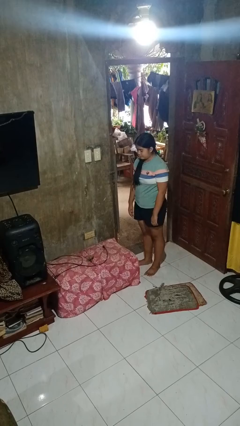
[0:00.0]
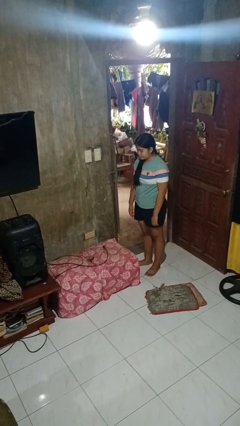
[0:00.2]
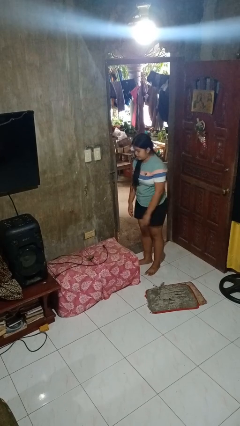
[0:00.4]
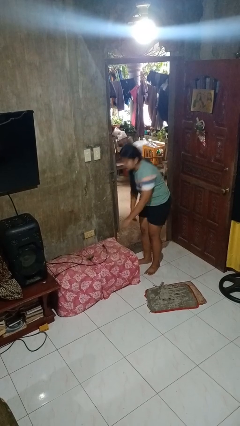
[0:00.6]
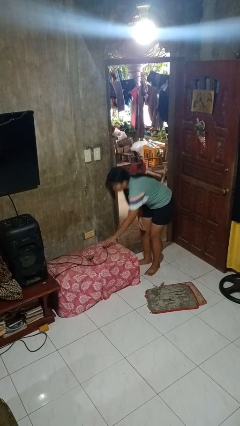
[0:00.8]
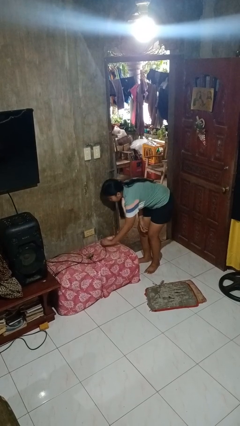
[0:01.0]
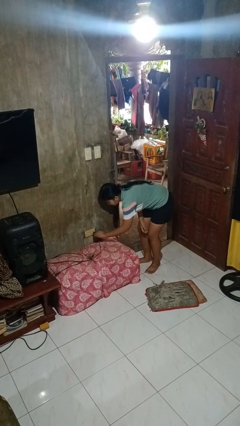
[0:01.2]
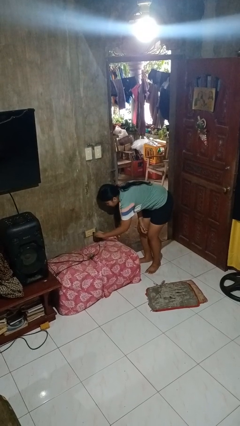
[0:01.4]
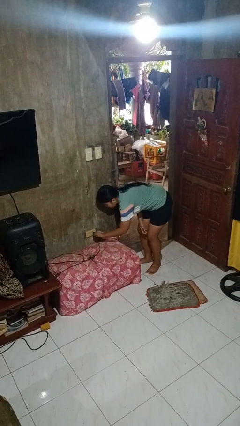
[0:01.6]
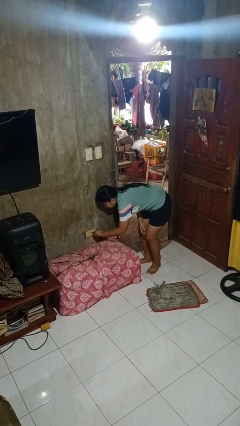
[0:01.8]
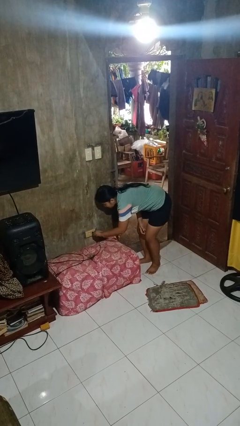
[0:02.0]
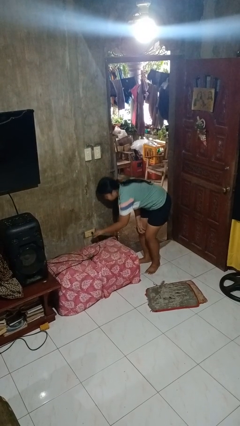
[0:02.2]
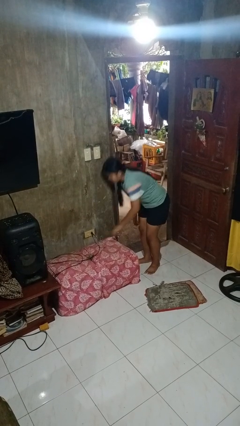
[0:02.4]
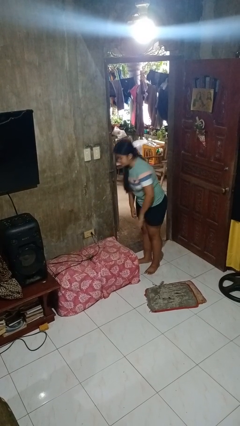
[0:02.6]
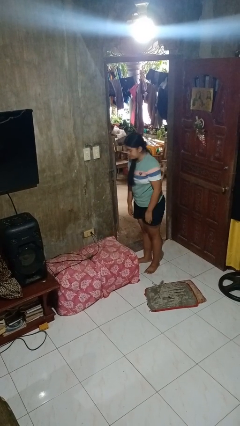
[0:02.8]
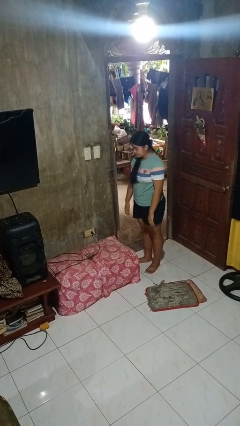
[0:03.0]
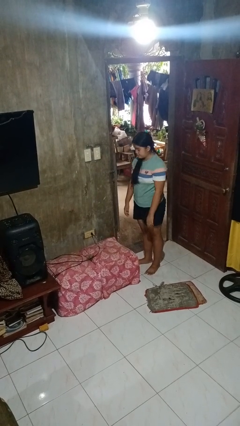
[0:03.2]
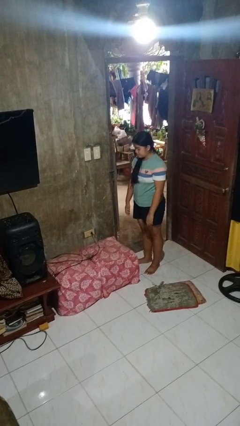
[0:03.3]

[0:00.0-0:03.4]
person plugs into electrical socket

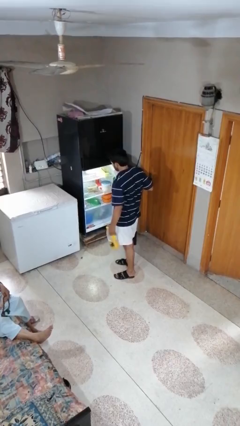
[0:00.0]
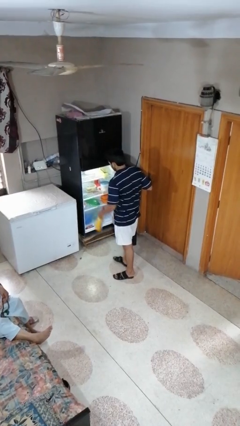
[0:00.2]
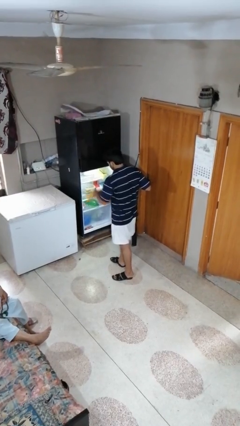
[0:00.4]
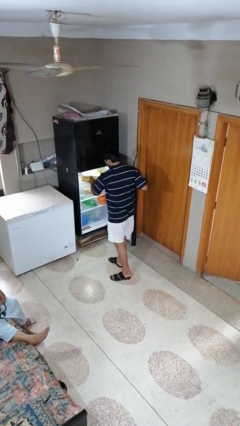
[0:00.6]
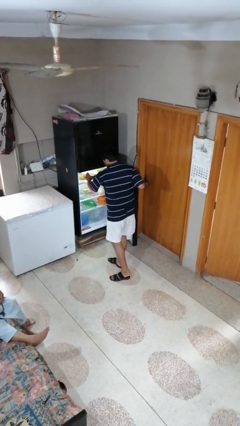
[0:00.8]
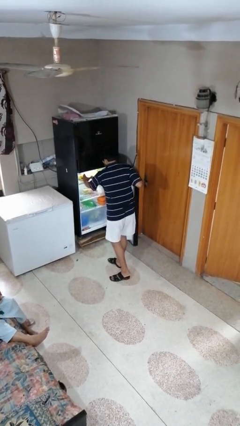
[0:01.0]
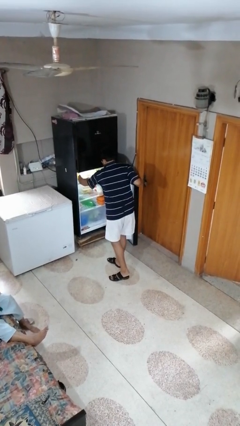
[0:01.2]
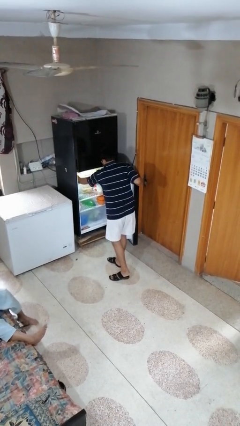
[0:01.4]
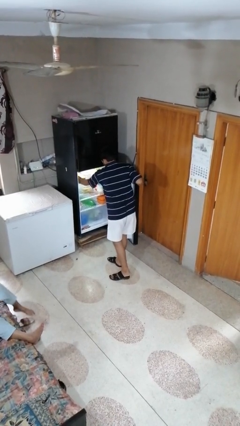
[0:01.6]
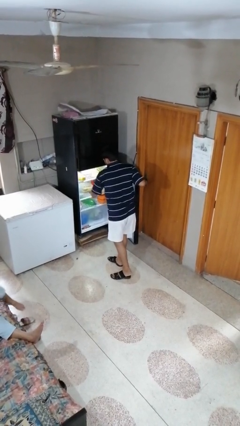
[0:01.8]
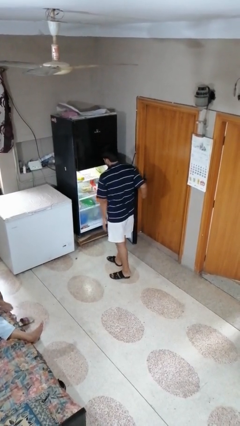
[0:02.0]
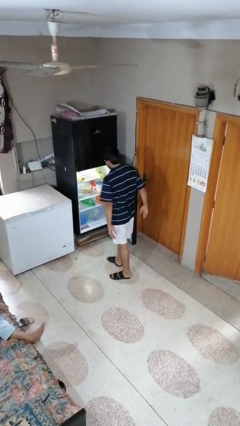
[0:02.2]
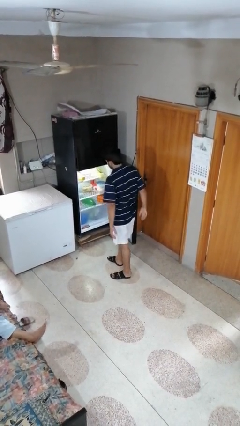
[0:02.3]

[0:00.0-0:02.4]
person puts object into refrigerator

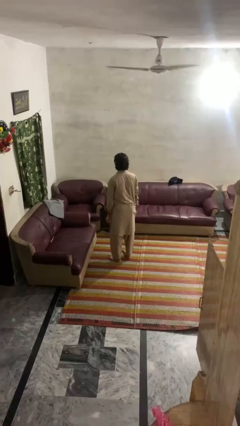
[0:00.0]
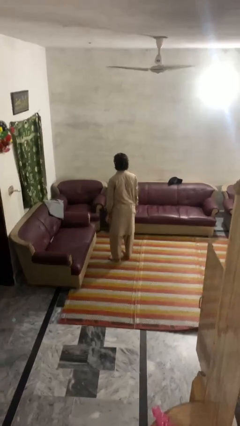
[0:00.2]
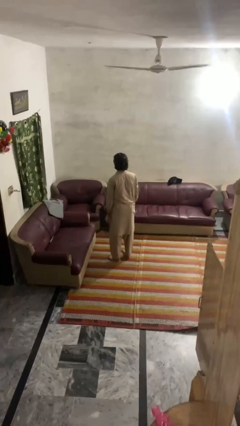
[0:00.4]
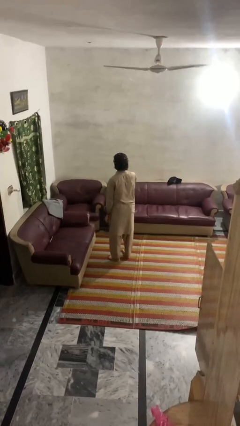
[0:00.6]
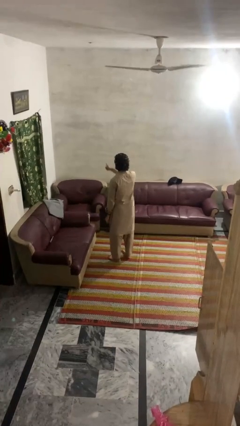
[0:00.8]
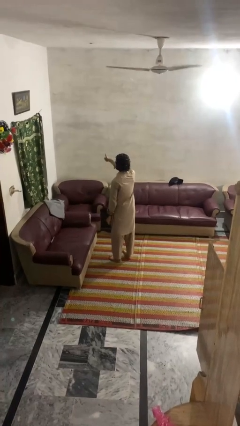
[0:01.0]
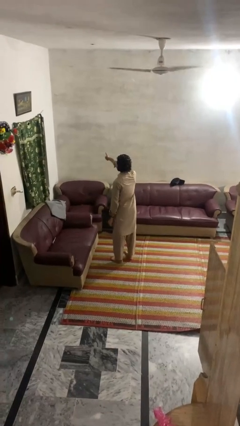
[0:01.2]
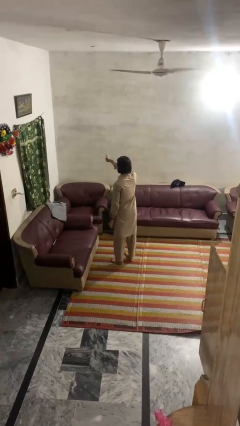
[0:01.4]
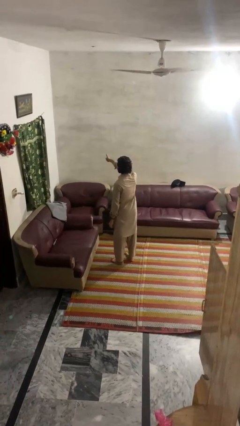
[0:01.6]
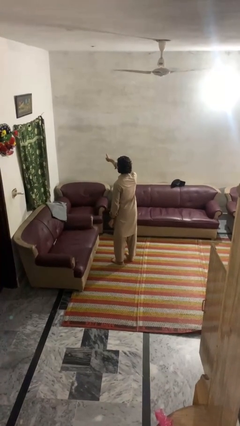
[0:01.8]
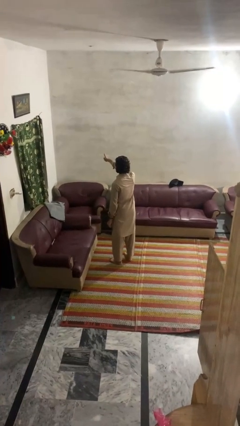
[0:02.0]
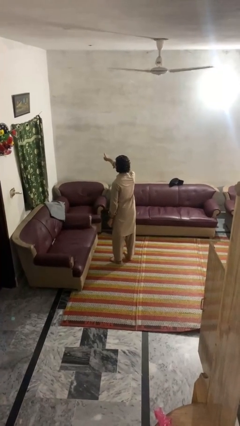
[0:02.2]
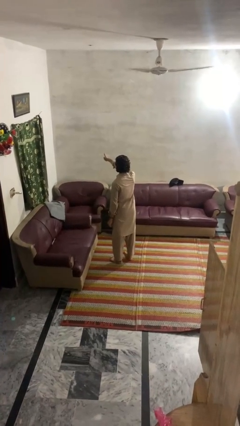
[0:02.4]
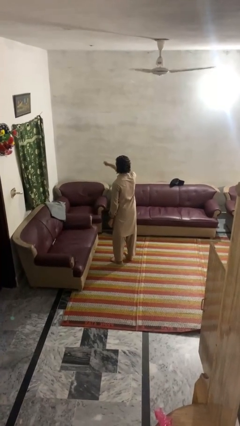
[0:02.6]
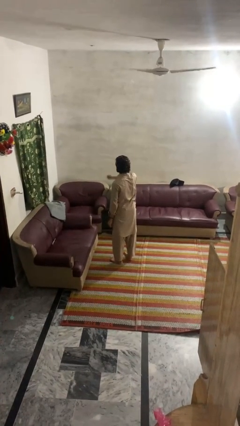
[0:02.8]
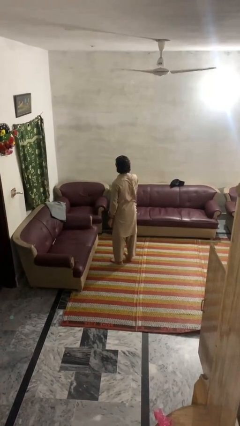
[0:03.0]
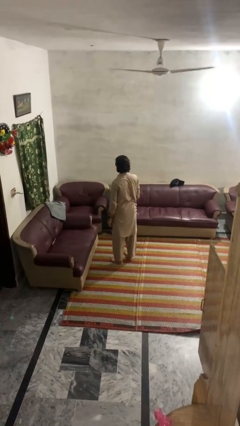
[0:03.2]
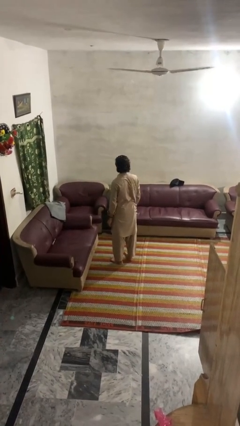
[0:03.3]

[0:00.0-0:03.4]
person gestures thumbs up

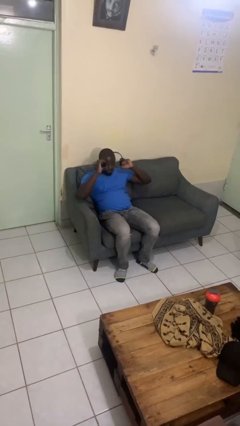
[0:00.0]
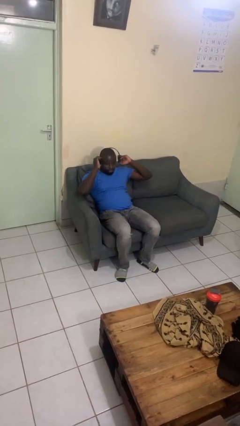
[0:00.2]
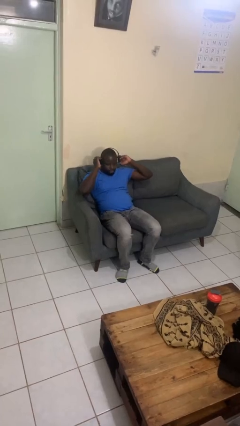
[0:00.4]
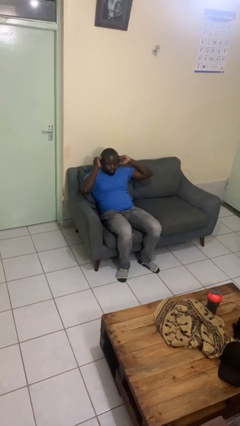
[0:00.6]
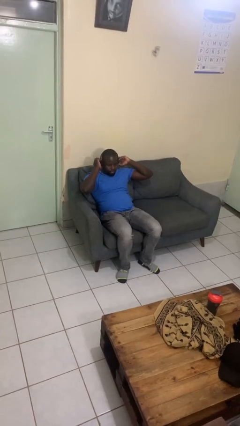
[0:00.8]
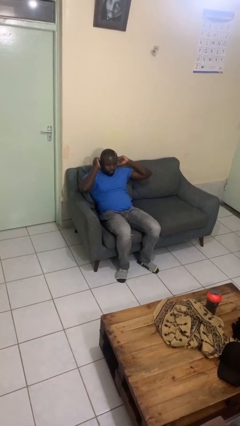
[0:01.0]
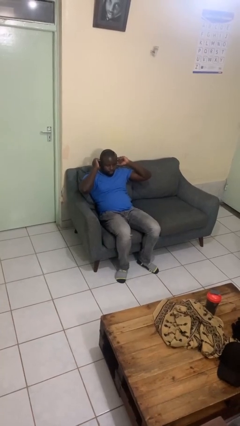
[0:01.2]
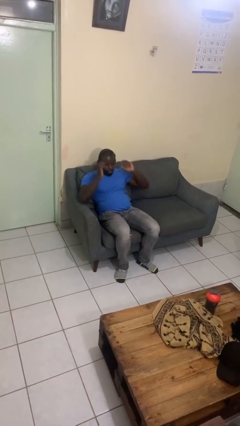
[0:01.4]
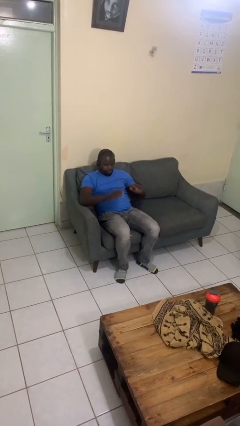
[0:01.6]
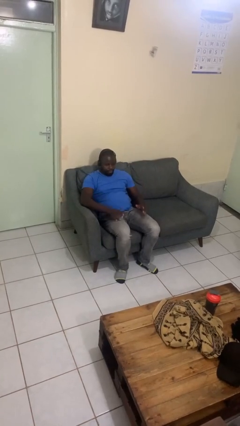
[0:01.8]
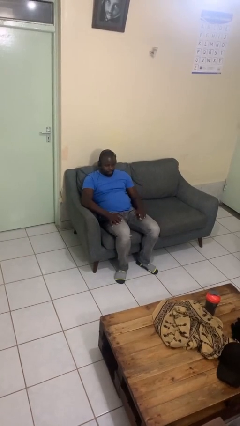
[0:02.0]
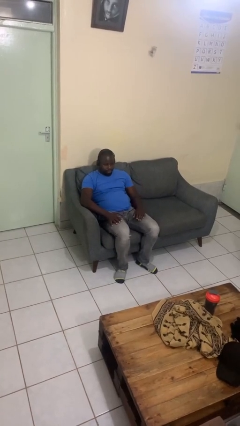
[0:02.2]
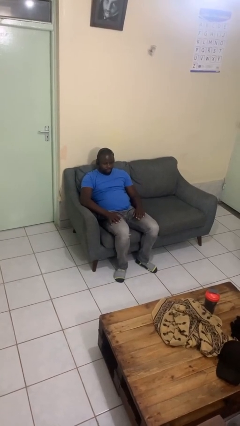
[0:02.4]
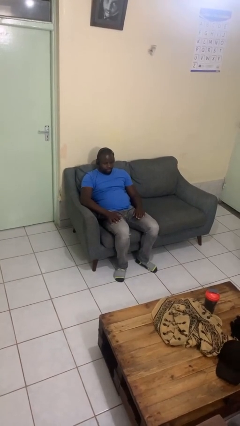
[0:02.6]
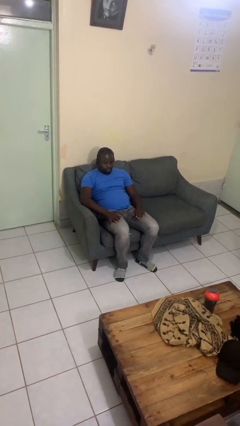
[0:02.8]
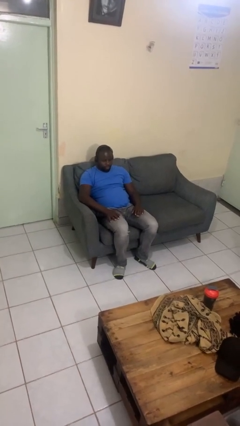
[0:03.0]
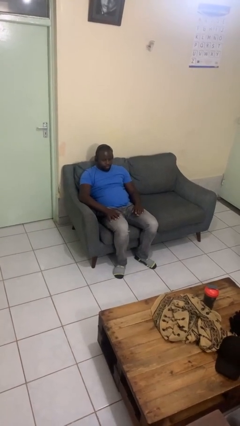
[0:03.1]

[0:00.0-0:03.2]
person puts on headphones

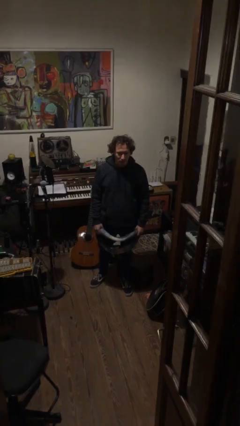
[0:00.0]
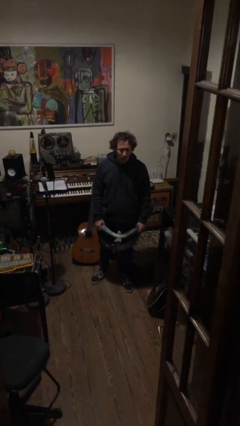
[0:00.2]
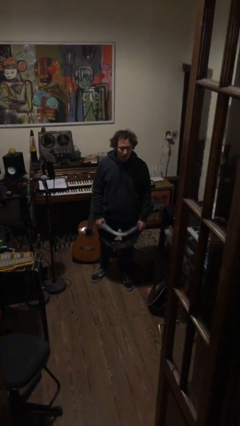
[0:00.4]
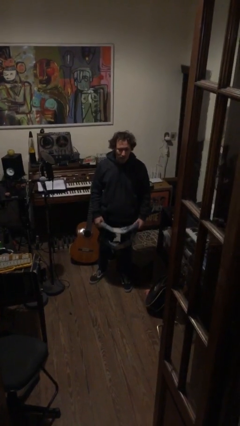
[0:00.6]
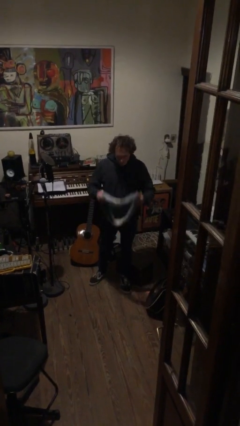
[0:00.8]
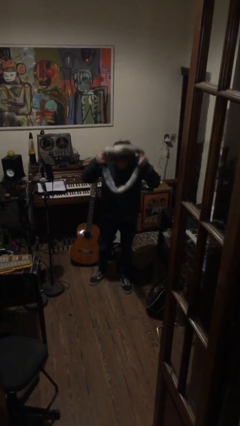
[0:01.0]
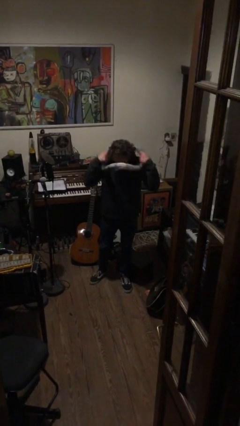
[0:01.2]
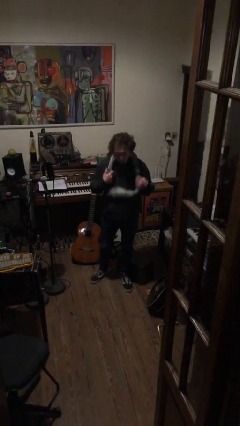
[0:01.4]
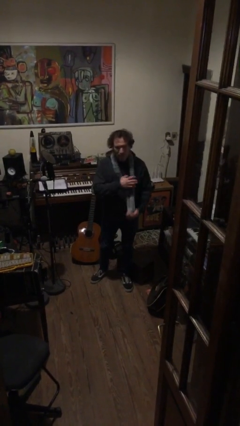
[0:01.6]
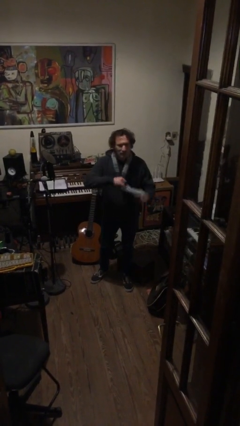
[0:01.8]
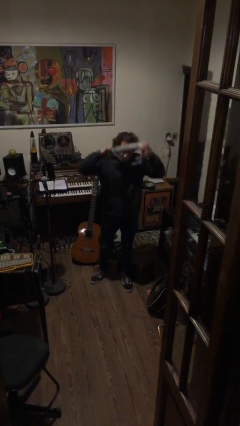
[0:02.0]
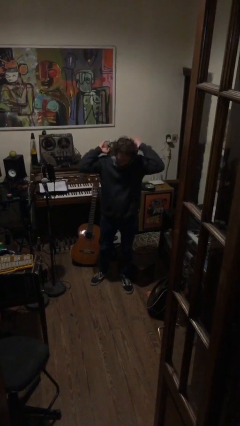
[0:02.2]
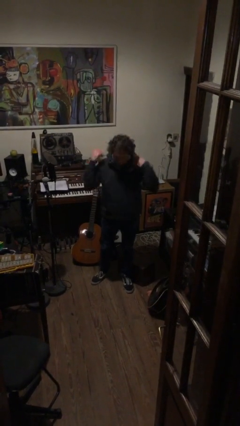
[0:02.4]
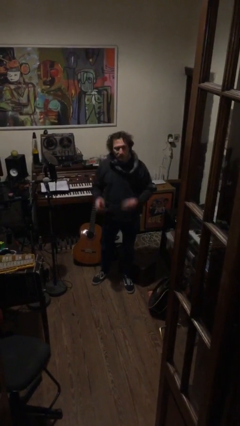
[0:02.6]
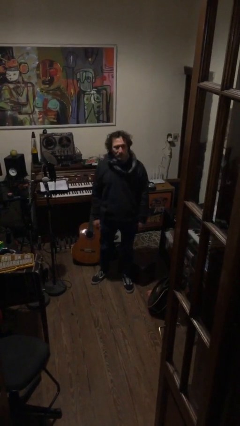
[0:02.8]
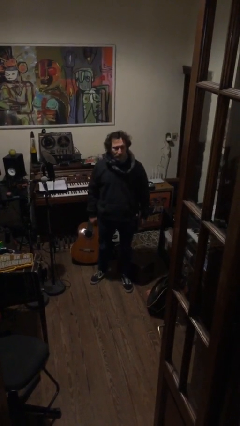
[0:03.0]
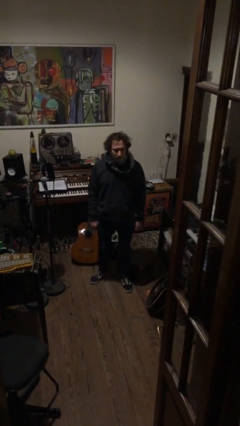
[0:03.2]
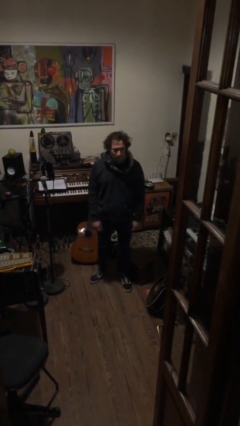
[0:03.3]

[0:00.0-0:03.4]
person puts on scarf

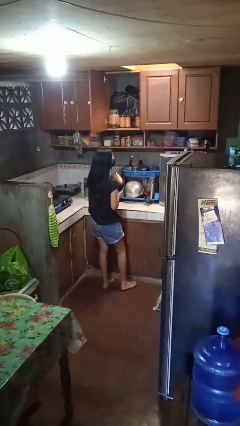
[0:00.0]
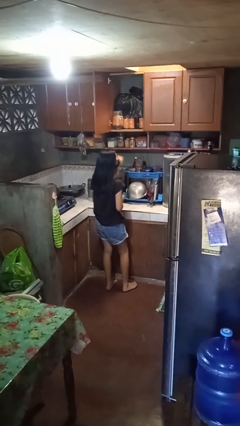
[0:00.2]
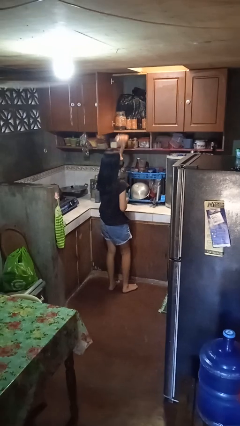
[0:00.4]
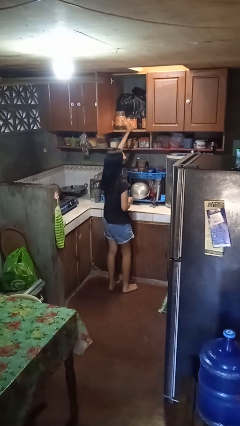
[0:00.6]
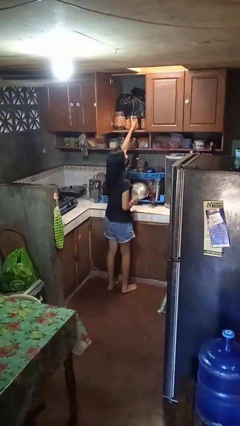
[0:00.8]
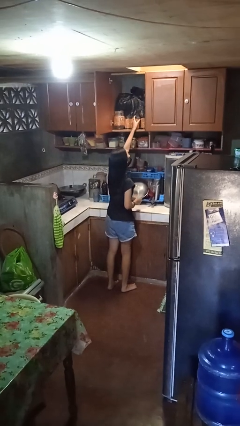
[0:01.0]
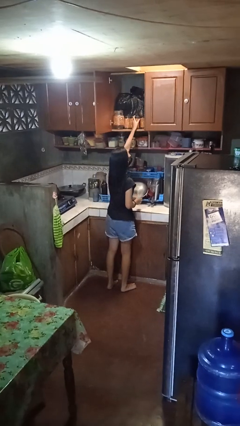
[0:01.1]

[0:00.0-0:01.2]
person puts down object into cabinet

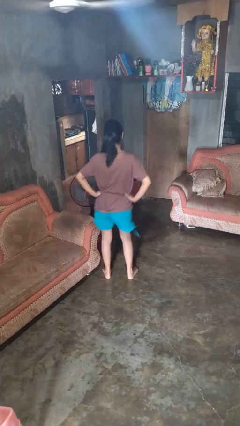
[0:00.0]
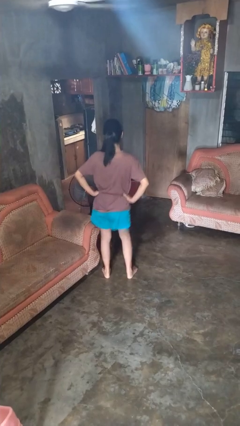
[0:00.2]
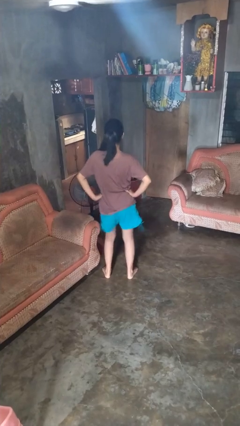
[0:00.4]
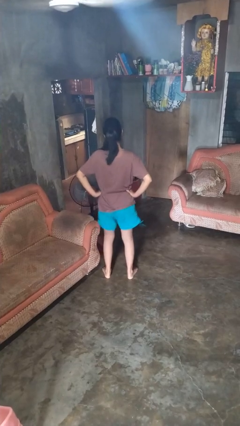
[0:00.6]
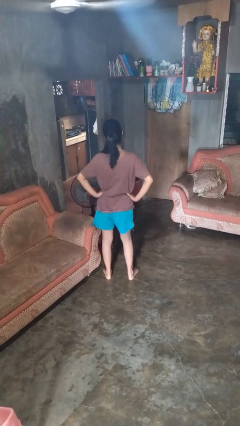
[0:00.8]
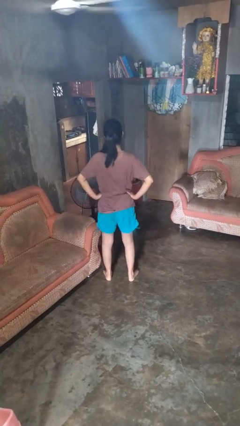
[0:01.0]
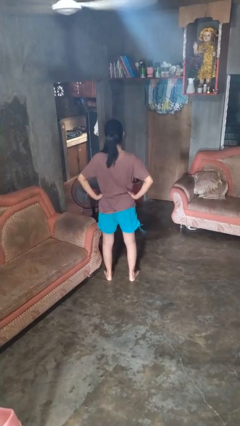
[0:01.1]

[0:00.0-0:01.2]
person wiggles hips
